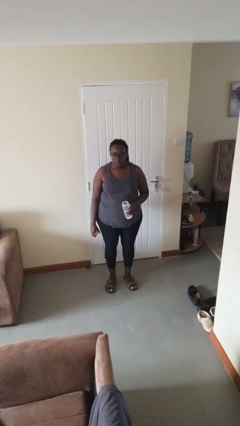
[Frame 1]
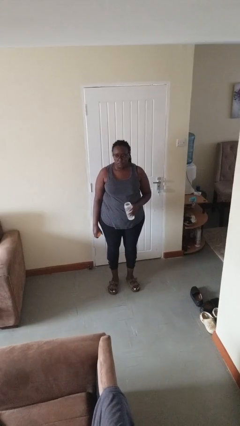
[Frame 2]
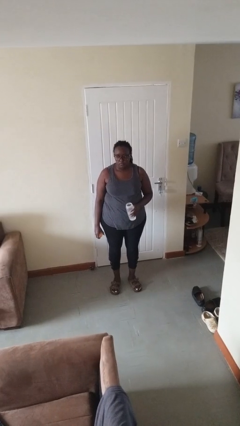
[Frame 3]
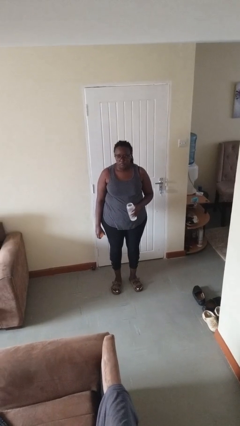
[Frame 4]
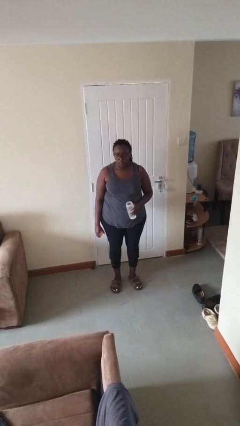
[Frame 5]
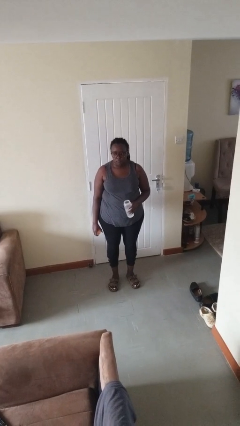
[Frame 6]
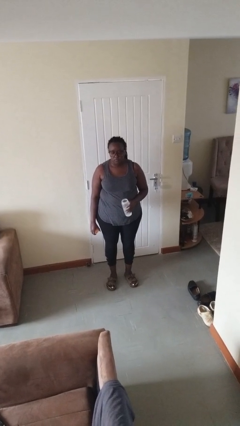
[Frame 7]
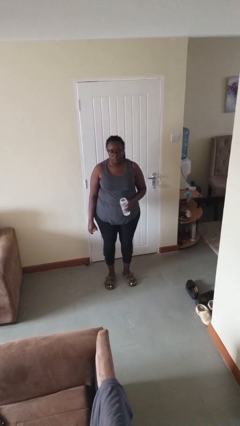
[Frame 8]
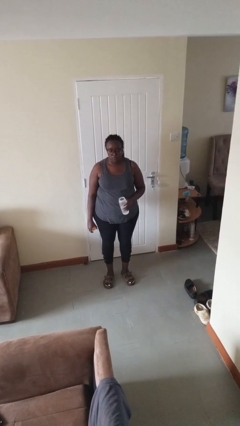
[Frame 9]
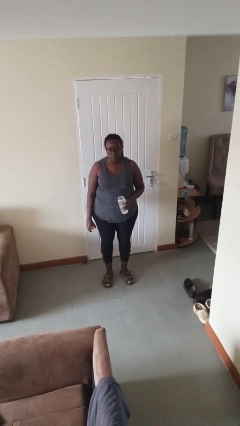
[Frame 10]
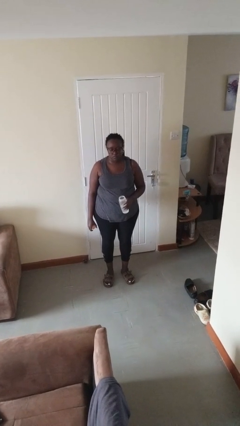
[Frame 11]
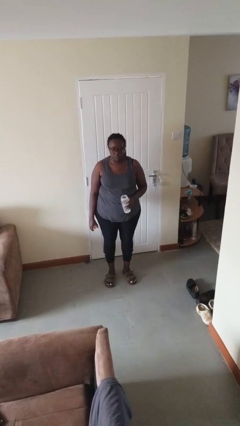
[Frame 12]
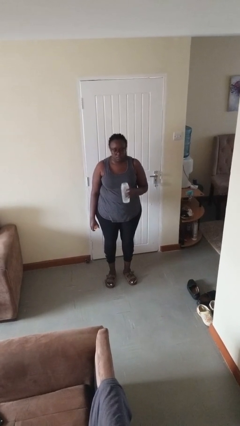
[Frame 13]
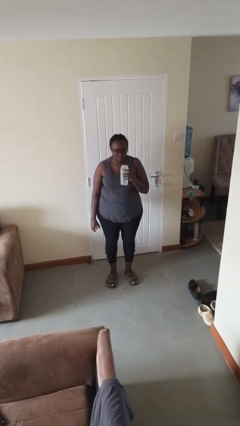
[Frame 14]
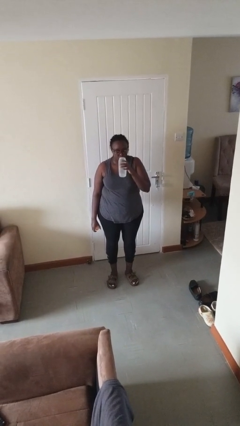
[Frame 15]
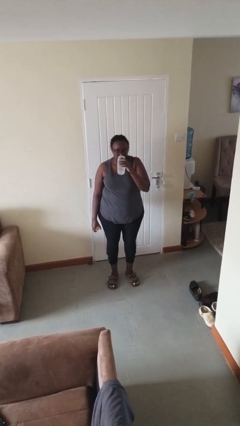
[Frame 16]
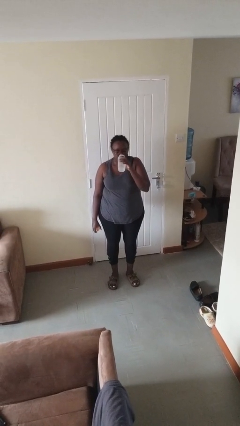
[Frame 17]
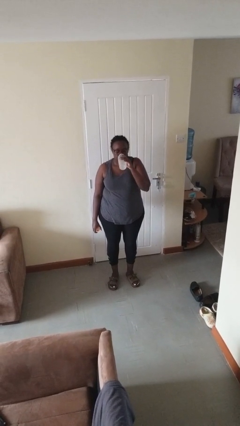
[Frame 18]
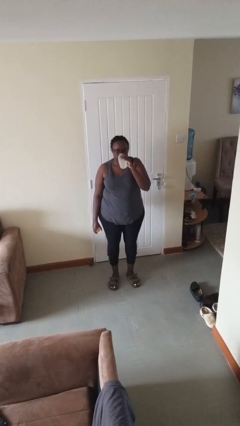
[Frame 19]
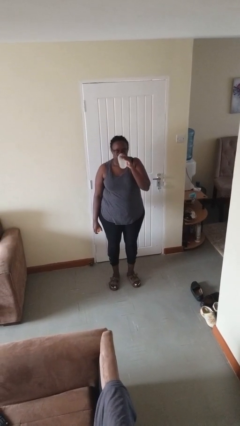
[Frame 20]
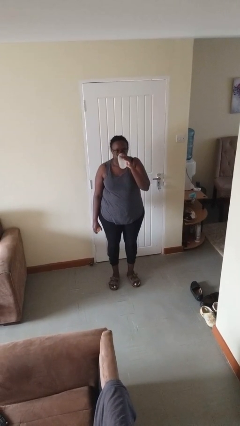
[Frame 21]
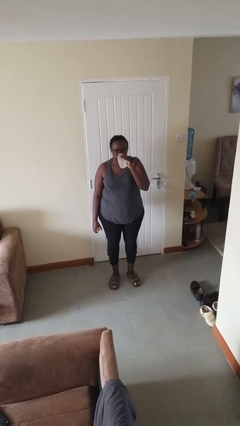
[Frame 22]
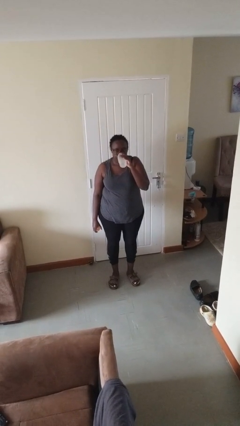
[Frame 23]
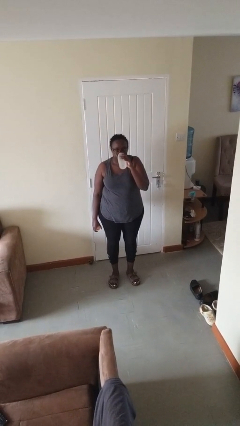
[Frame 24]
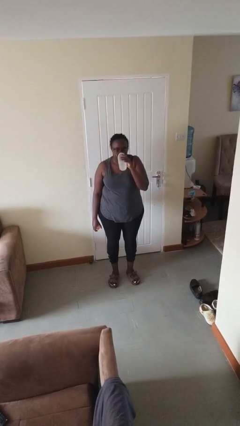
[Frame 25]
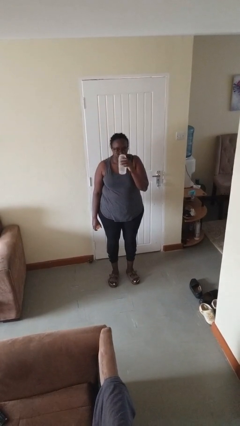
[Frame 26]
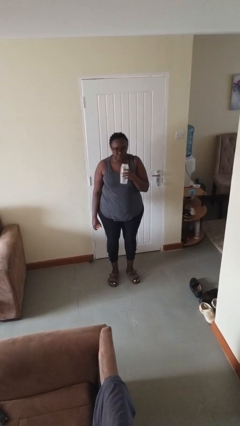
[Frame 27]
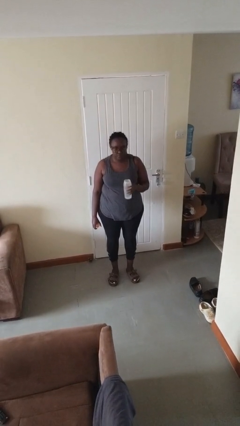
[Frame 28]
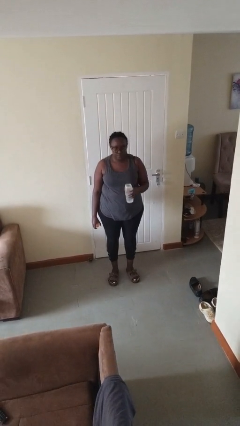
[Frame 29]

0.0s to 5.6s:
person drinks from bottle

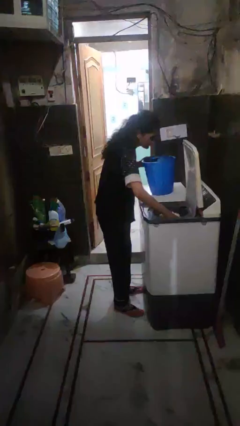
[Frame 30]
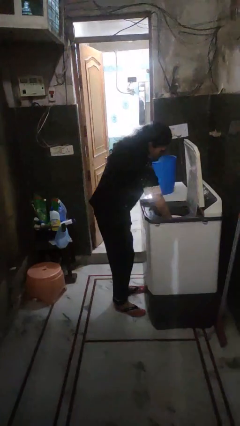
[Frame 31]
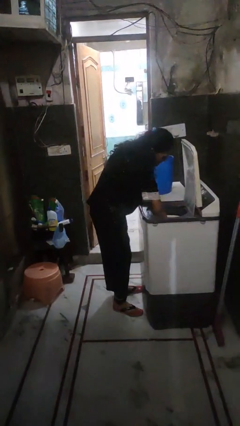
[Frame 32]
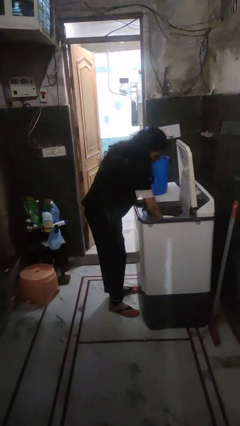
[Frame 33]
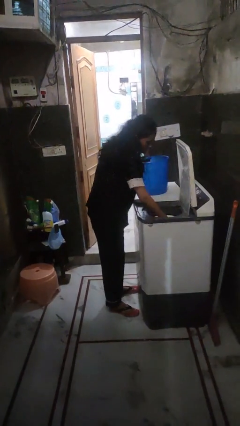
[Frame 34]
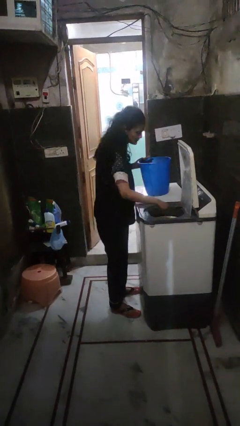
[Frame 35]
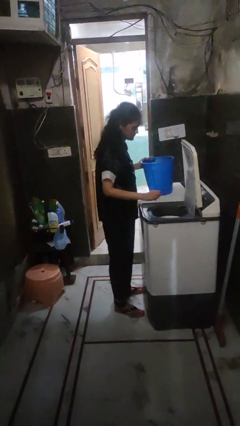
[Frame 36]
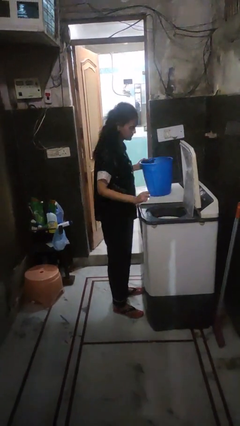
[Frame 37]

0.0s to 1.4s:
person loads dryer

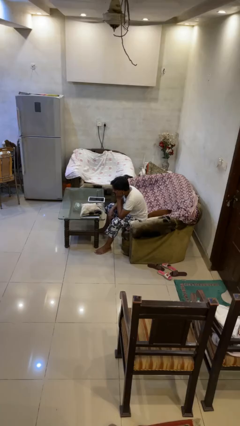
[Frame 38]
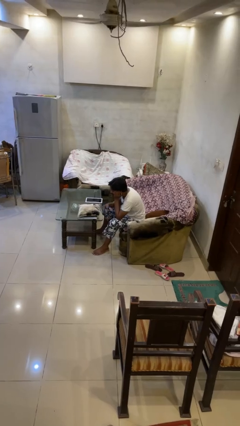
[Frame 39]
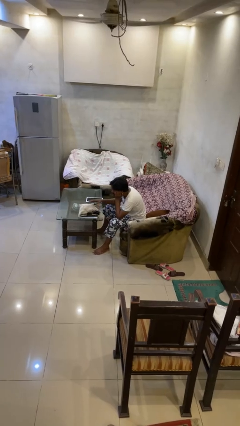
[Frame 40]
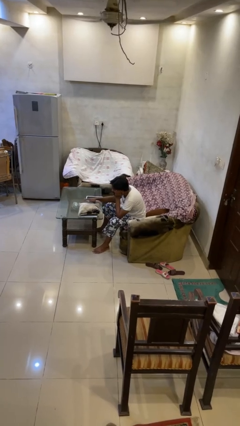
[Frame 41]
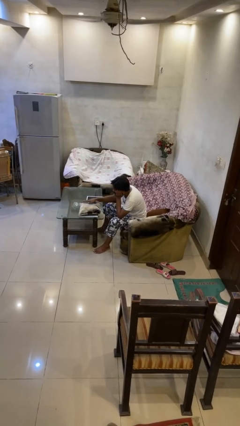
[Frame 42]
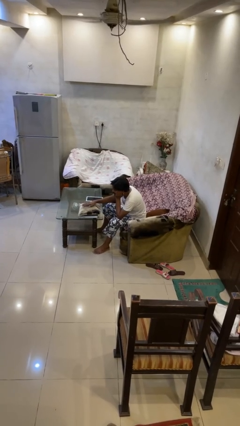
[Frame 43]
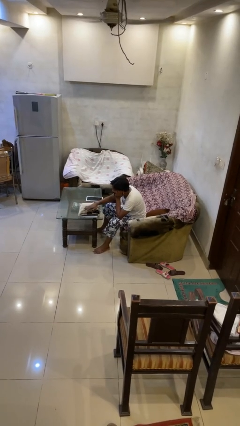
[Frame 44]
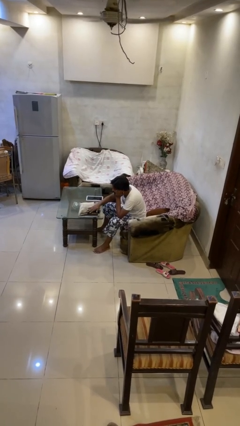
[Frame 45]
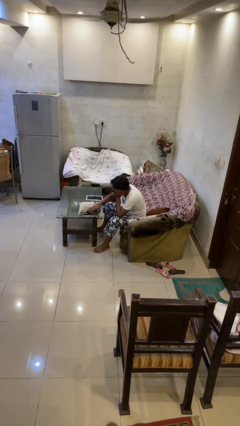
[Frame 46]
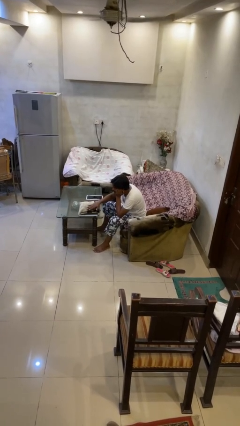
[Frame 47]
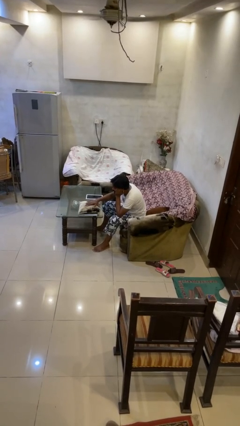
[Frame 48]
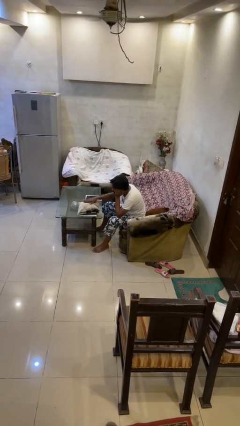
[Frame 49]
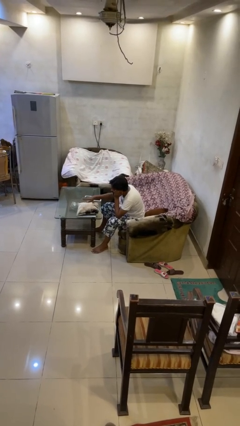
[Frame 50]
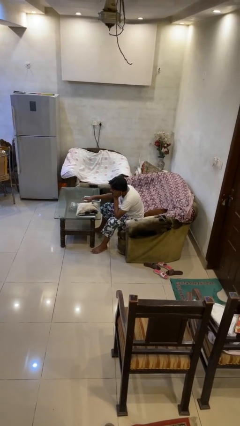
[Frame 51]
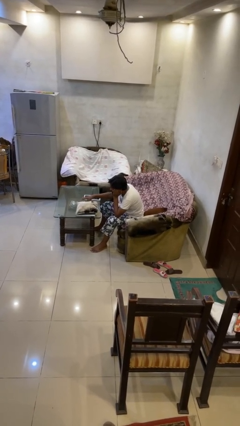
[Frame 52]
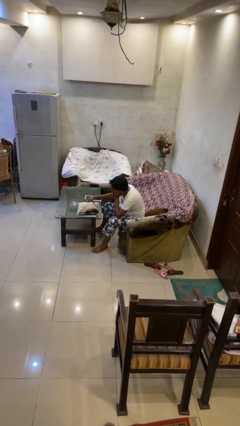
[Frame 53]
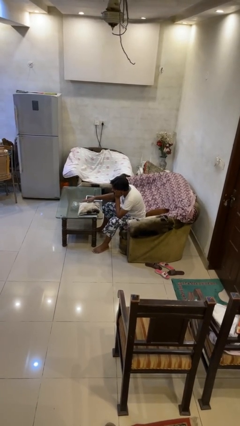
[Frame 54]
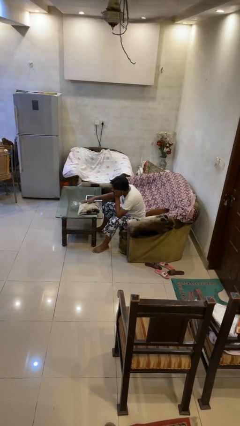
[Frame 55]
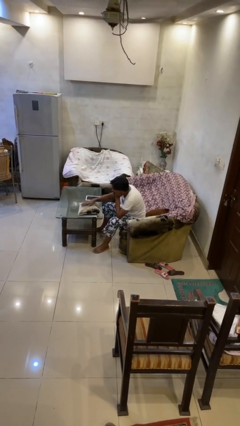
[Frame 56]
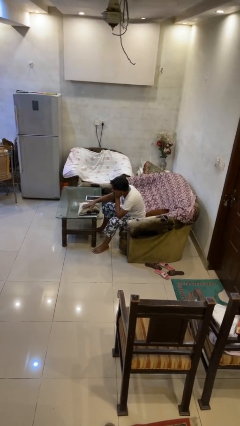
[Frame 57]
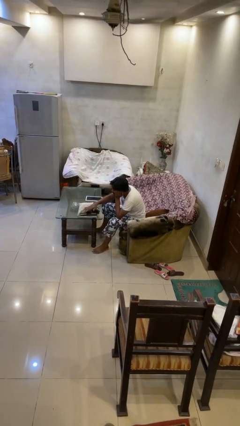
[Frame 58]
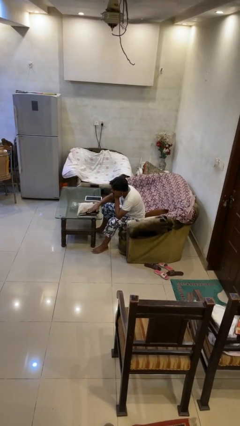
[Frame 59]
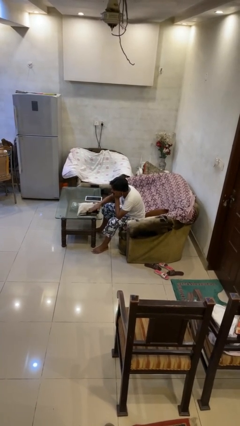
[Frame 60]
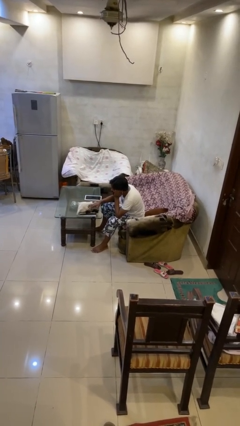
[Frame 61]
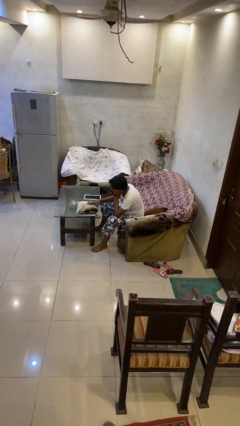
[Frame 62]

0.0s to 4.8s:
person waves hand over object

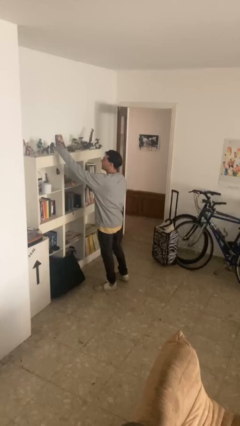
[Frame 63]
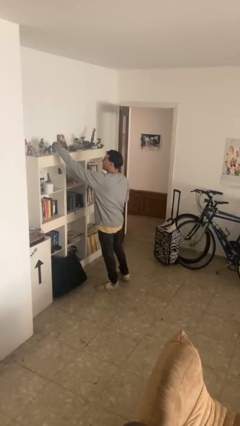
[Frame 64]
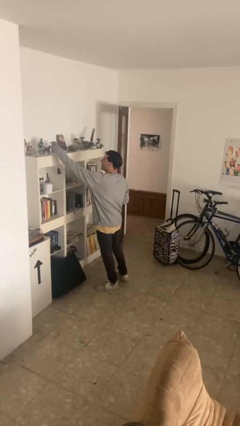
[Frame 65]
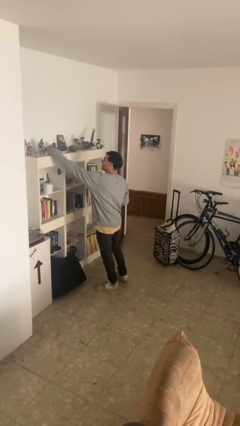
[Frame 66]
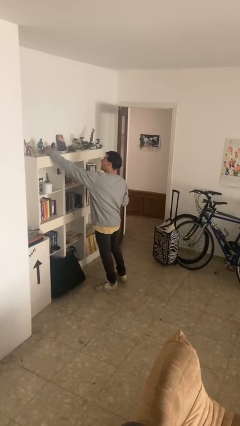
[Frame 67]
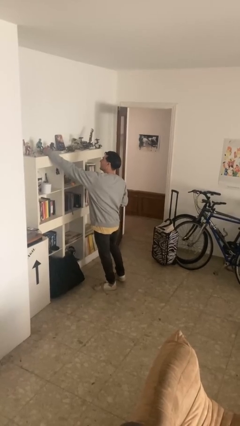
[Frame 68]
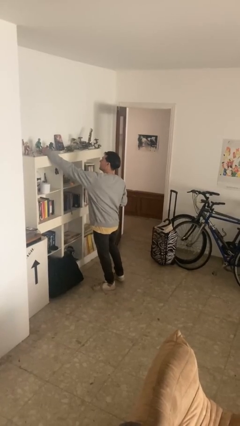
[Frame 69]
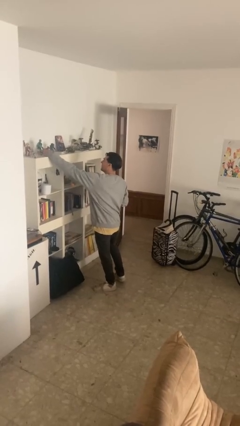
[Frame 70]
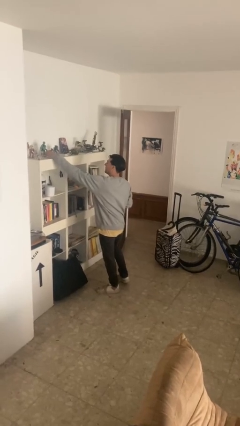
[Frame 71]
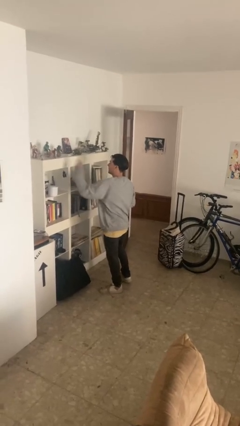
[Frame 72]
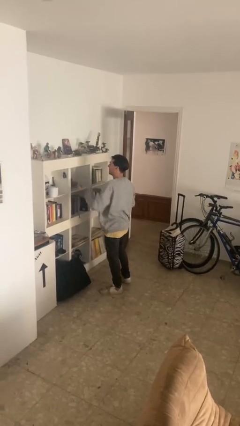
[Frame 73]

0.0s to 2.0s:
person puts down object on shelf

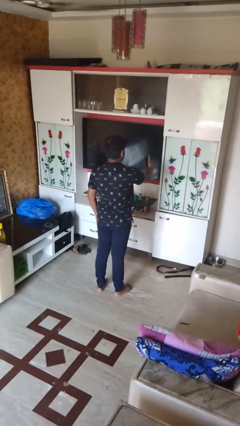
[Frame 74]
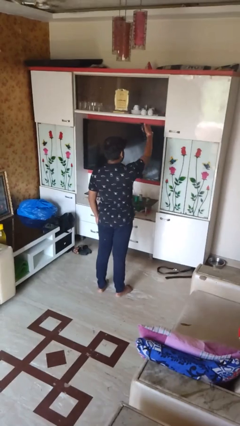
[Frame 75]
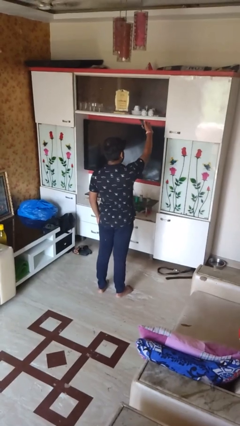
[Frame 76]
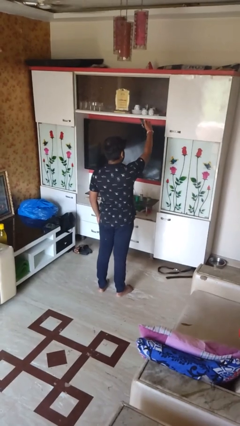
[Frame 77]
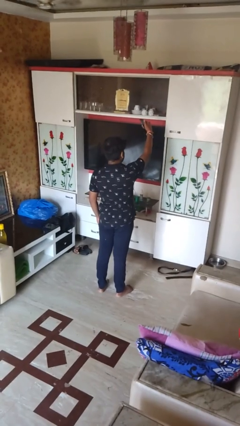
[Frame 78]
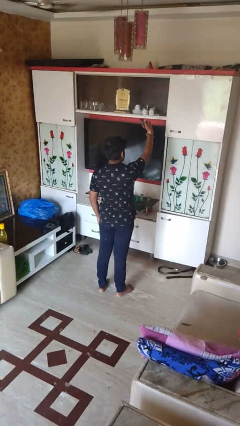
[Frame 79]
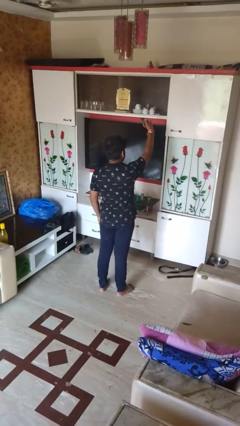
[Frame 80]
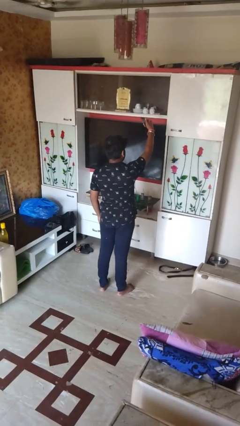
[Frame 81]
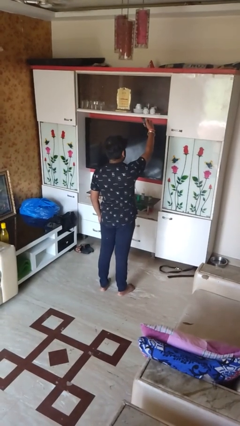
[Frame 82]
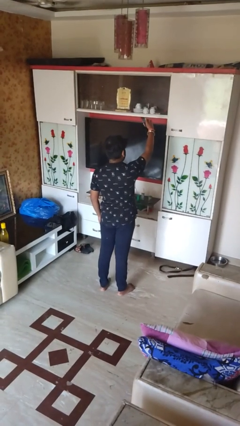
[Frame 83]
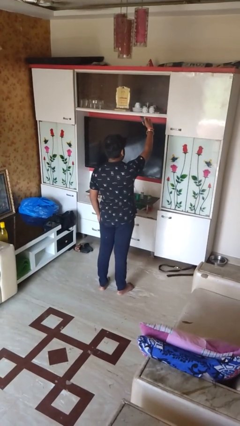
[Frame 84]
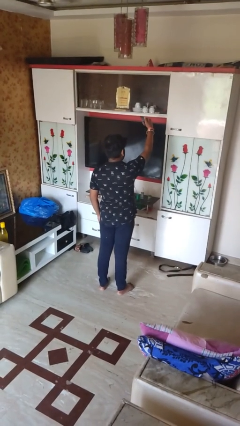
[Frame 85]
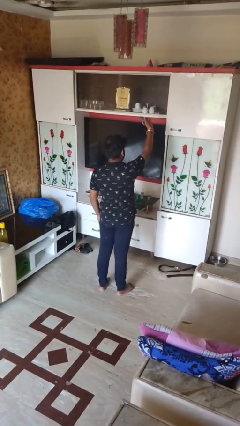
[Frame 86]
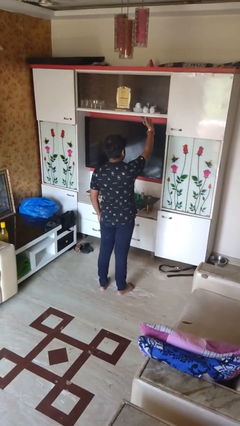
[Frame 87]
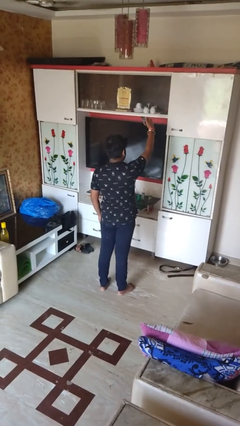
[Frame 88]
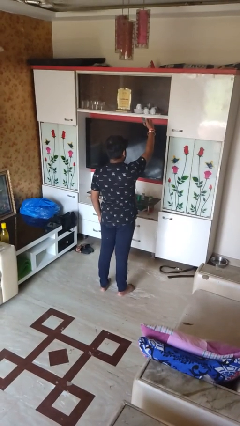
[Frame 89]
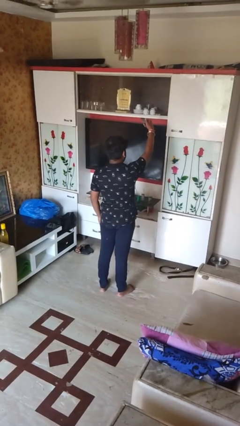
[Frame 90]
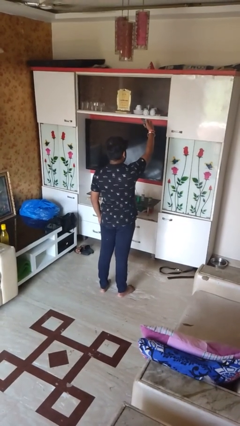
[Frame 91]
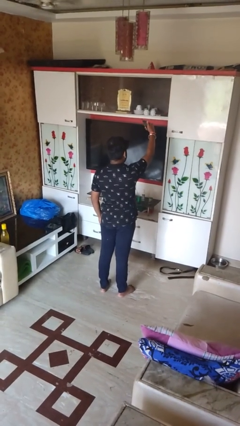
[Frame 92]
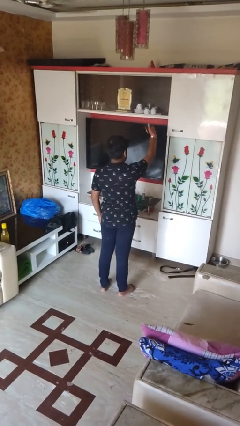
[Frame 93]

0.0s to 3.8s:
person takes selfie
